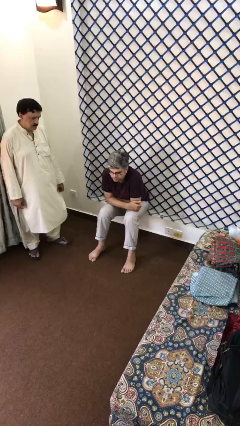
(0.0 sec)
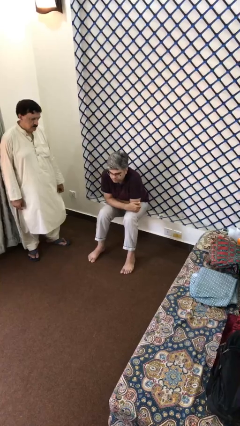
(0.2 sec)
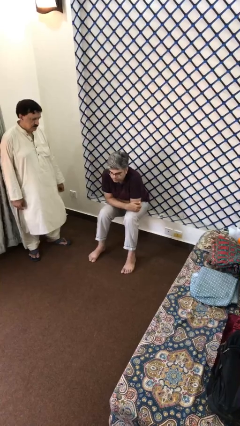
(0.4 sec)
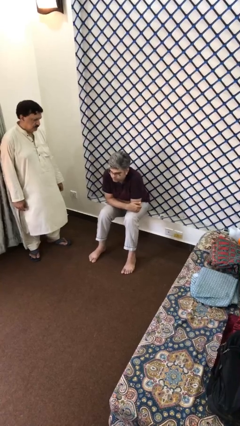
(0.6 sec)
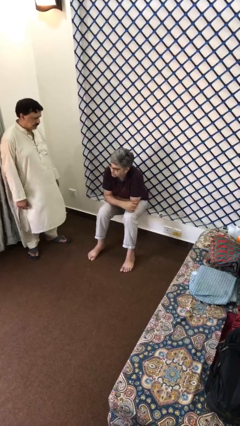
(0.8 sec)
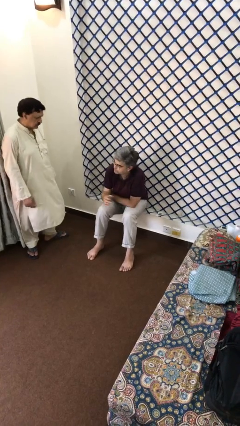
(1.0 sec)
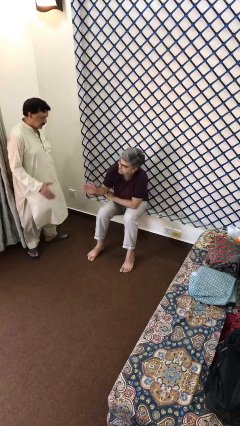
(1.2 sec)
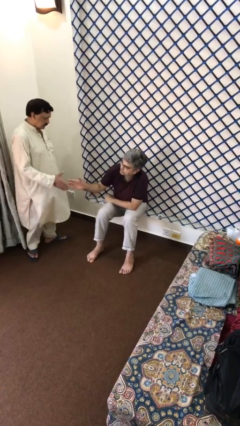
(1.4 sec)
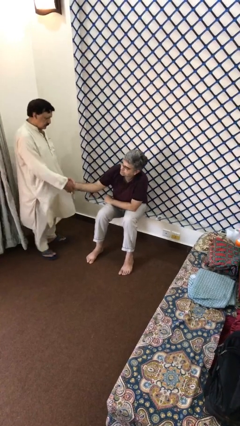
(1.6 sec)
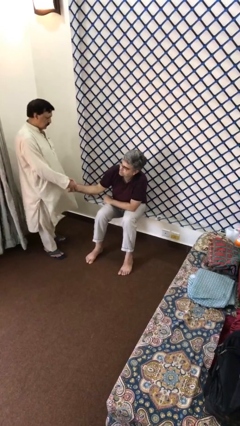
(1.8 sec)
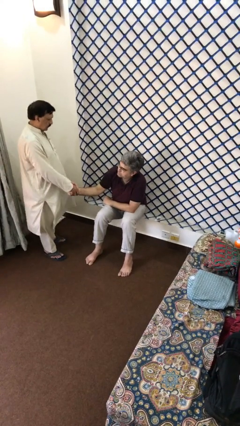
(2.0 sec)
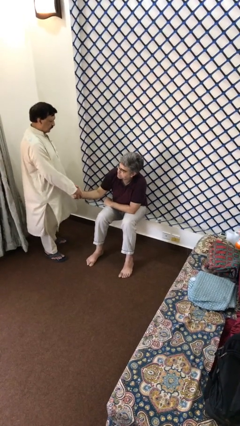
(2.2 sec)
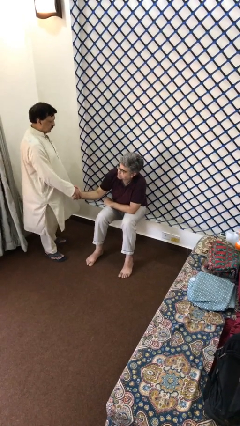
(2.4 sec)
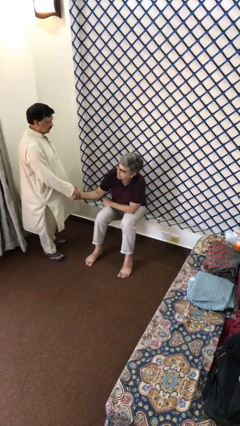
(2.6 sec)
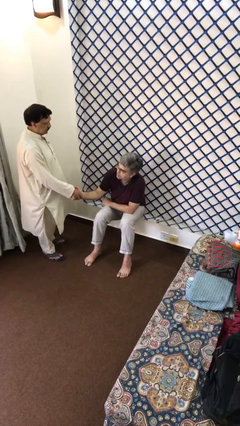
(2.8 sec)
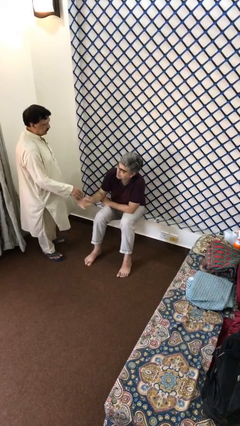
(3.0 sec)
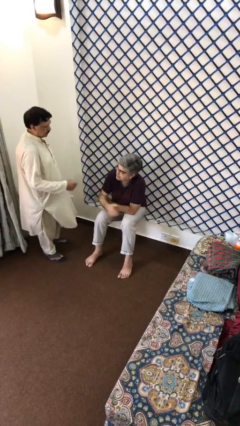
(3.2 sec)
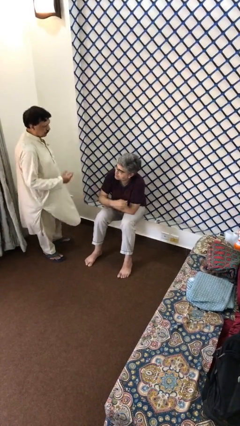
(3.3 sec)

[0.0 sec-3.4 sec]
person shakes hand

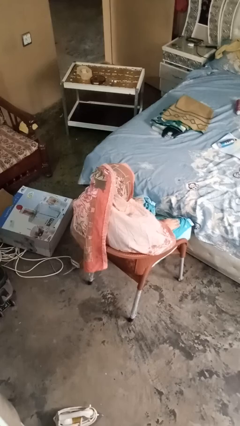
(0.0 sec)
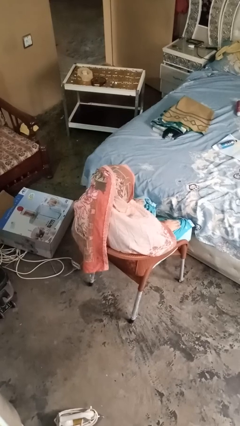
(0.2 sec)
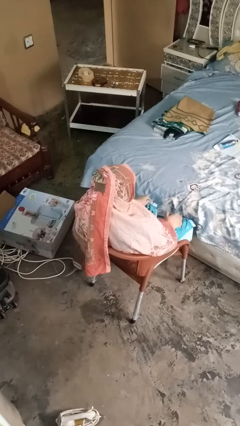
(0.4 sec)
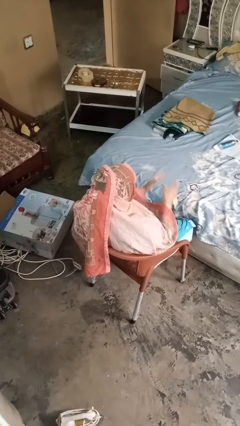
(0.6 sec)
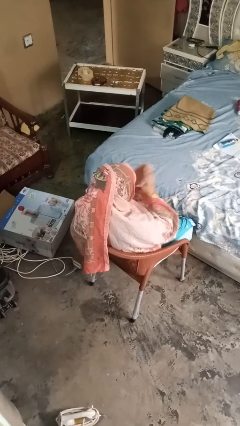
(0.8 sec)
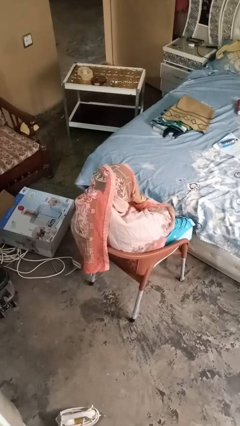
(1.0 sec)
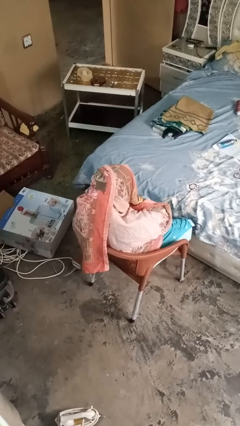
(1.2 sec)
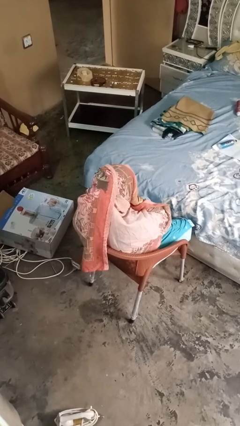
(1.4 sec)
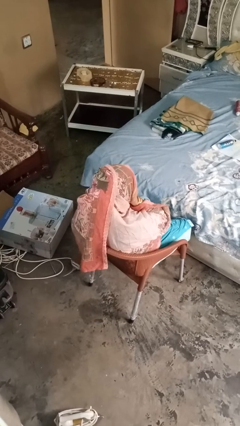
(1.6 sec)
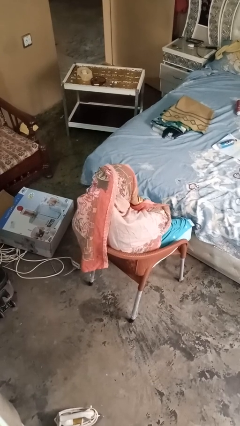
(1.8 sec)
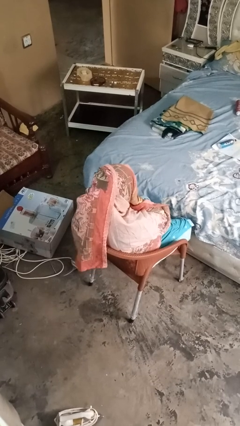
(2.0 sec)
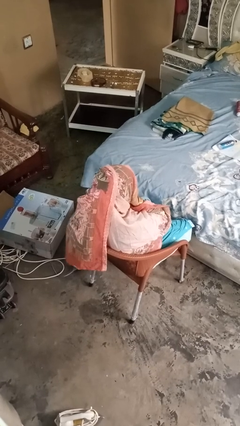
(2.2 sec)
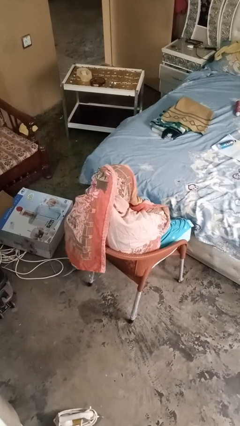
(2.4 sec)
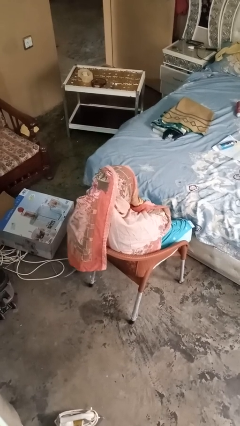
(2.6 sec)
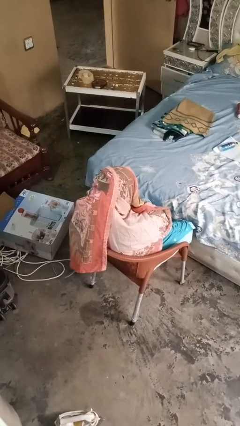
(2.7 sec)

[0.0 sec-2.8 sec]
person covers face with hands

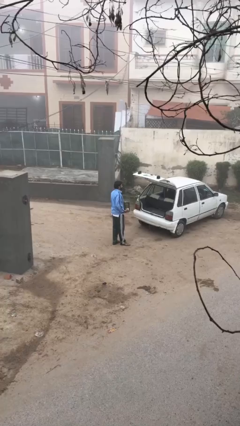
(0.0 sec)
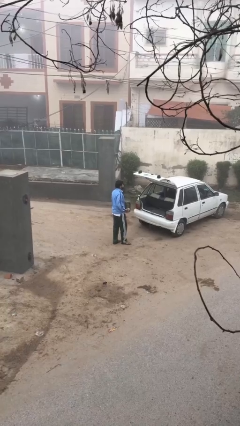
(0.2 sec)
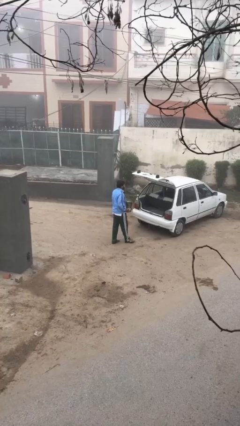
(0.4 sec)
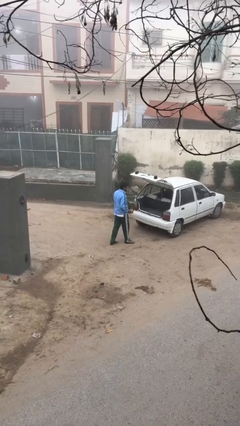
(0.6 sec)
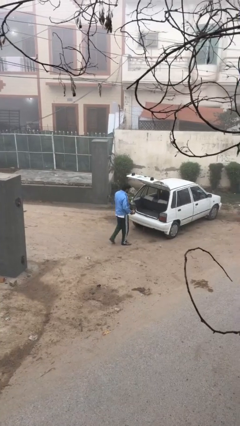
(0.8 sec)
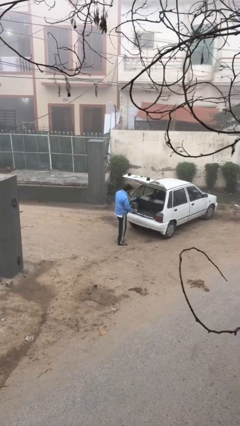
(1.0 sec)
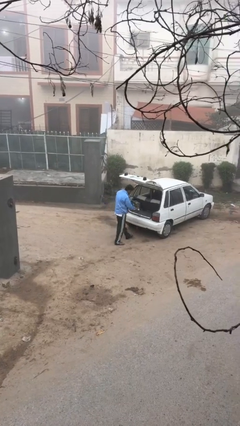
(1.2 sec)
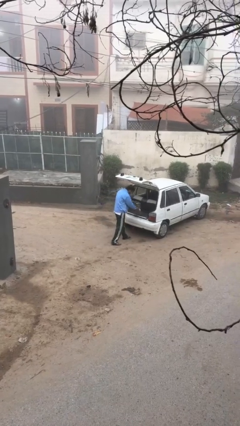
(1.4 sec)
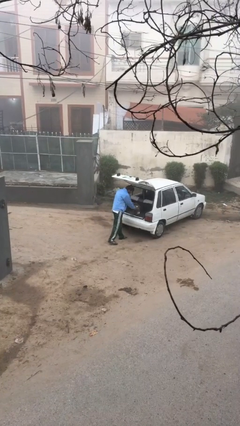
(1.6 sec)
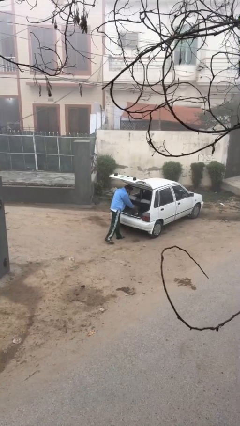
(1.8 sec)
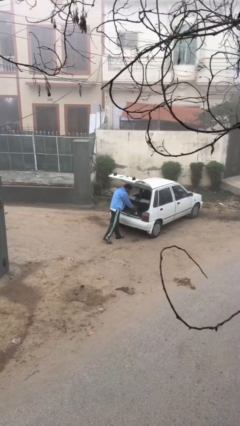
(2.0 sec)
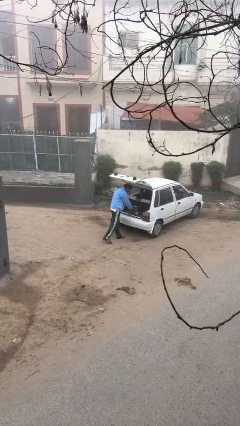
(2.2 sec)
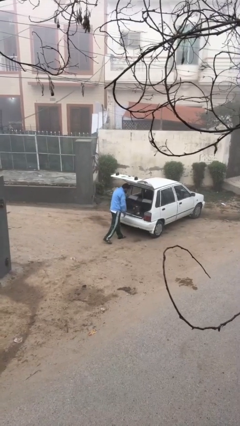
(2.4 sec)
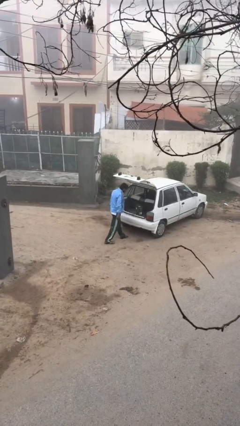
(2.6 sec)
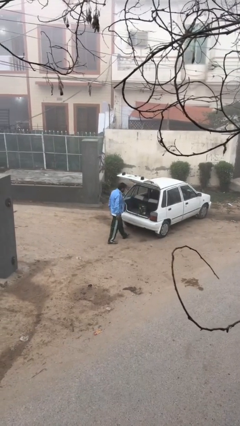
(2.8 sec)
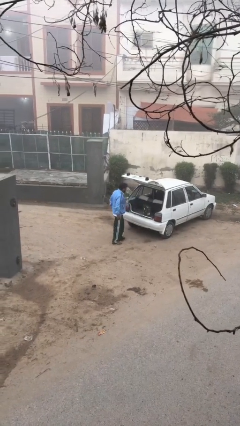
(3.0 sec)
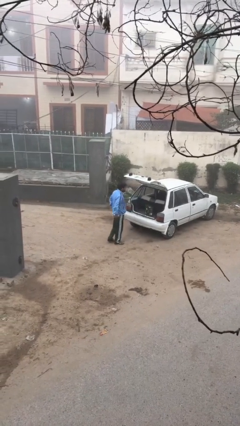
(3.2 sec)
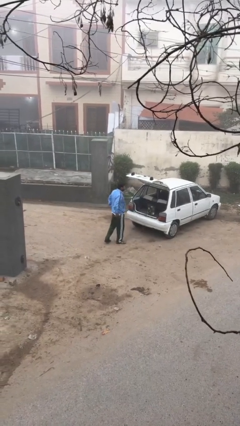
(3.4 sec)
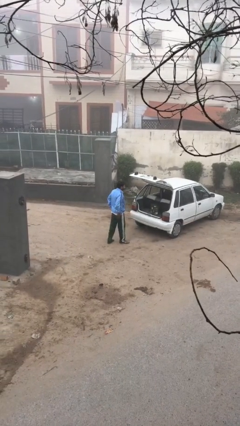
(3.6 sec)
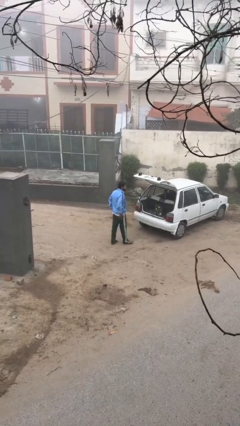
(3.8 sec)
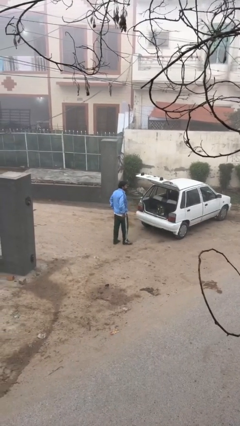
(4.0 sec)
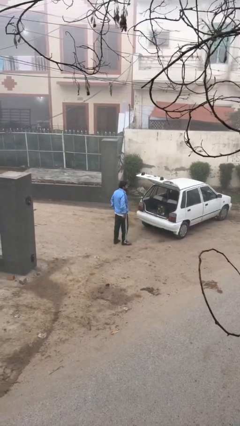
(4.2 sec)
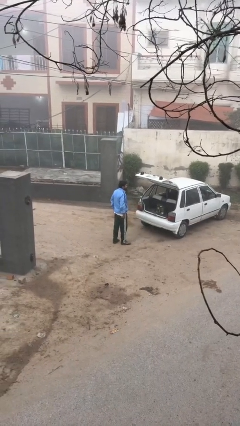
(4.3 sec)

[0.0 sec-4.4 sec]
person loads car

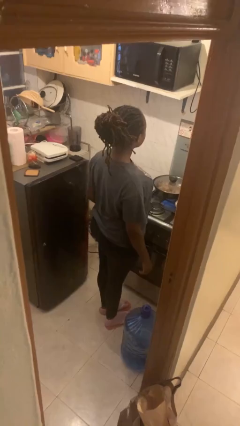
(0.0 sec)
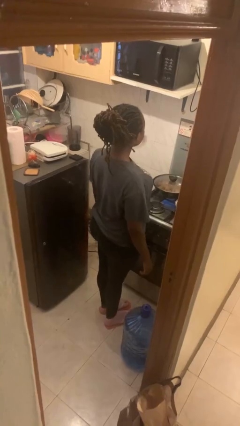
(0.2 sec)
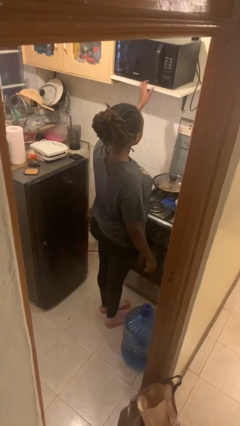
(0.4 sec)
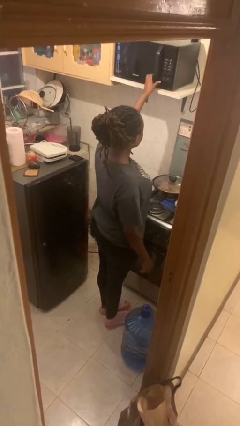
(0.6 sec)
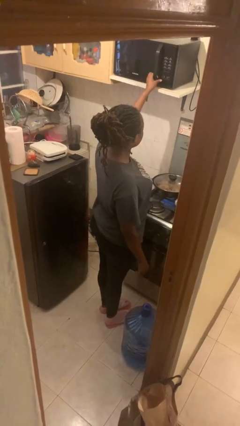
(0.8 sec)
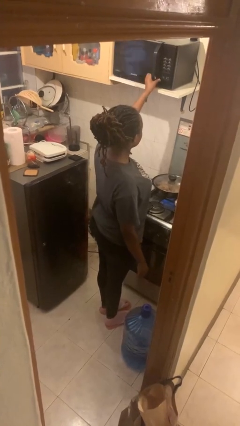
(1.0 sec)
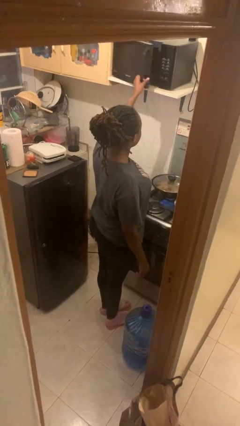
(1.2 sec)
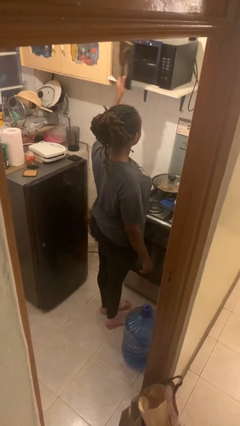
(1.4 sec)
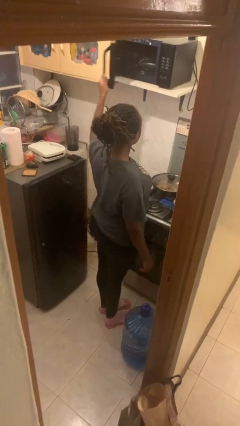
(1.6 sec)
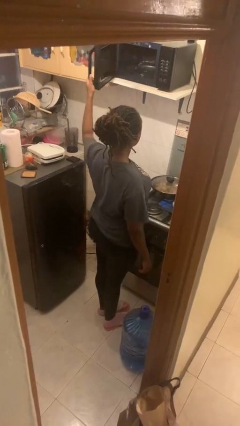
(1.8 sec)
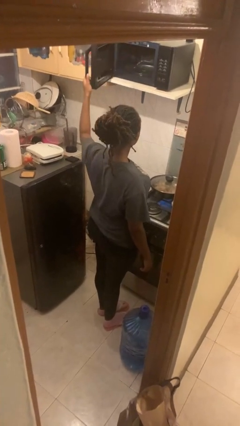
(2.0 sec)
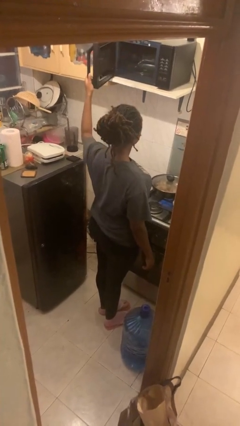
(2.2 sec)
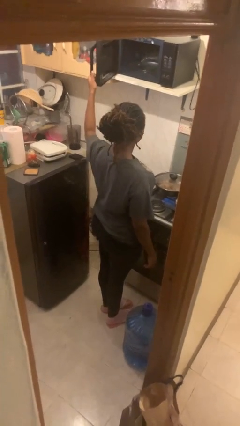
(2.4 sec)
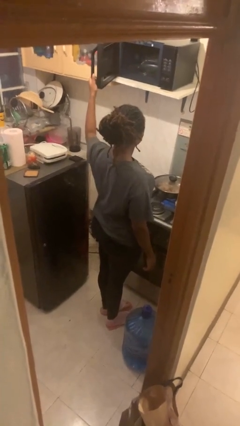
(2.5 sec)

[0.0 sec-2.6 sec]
person opens microwave

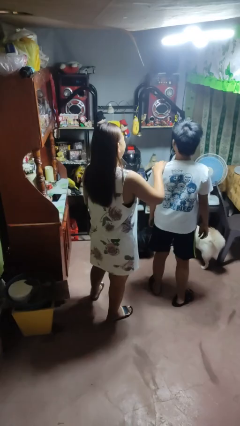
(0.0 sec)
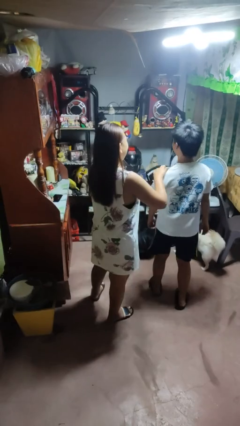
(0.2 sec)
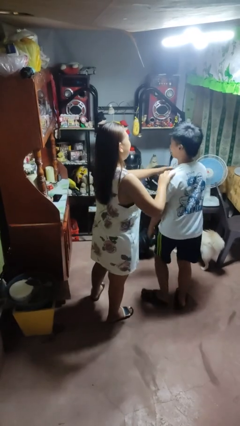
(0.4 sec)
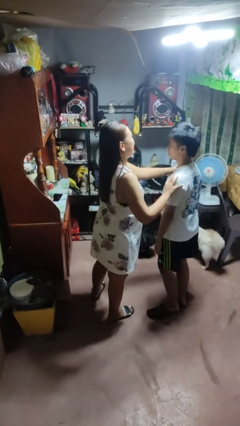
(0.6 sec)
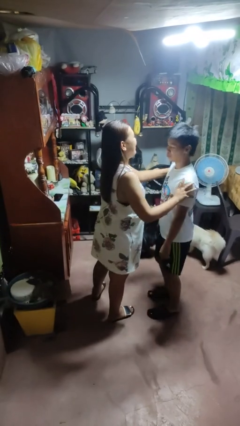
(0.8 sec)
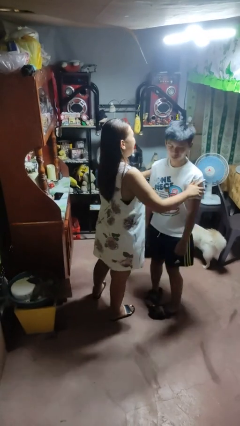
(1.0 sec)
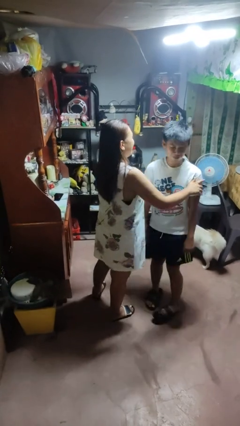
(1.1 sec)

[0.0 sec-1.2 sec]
person spins person around

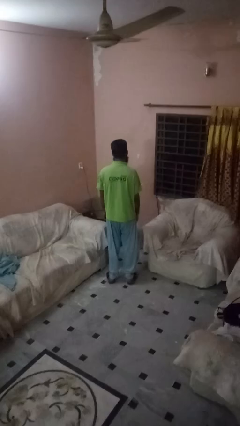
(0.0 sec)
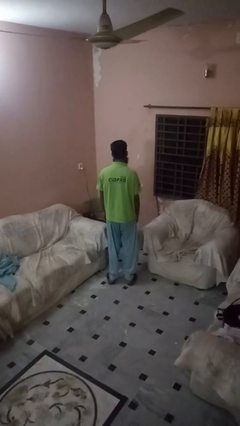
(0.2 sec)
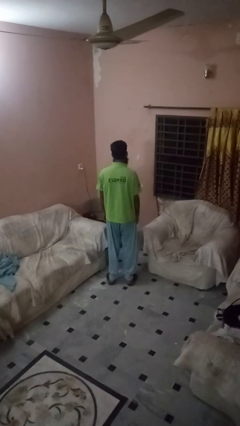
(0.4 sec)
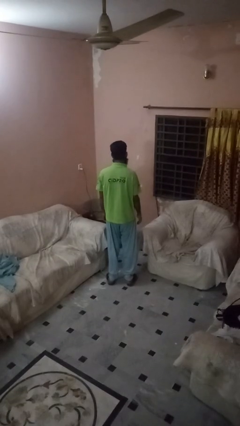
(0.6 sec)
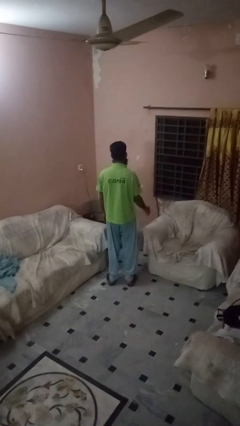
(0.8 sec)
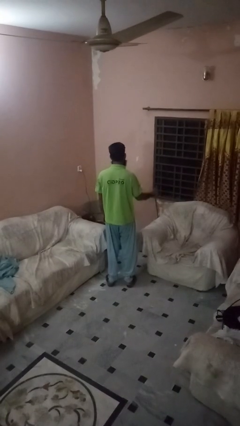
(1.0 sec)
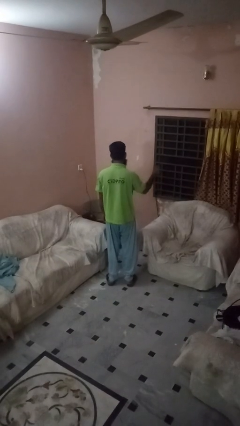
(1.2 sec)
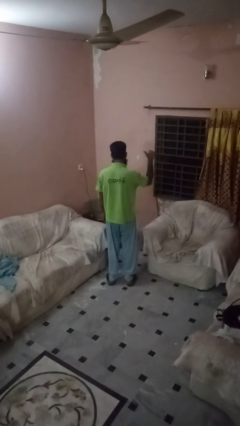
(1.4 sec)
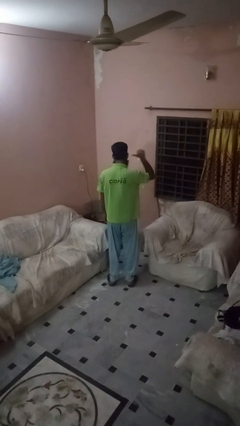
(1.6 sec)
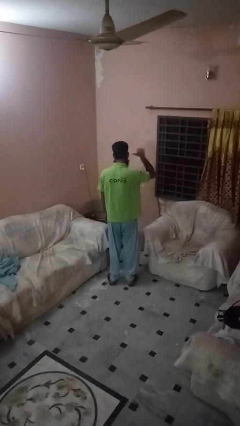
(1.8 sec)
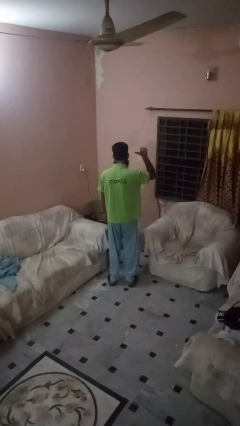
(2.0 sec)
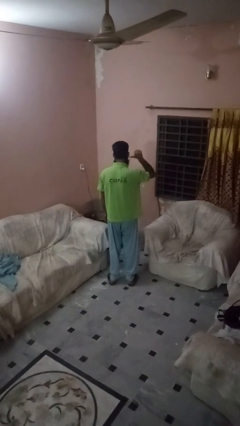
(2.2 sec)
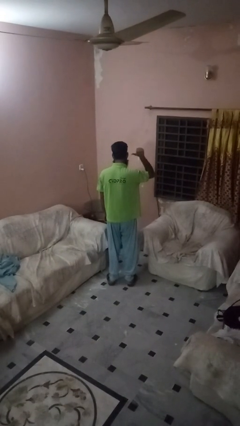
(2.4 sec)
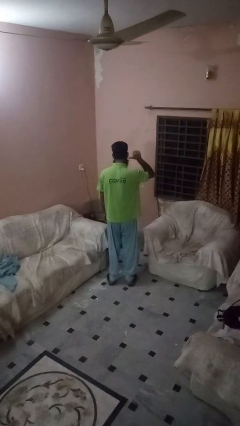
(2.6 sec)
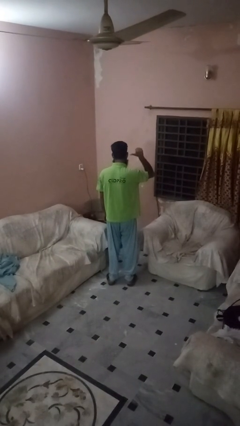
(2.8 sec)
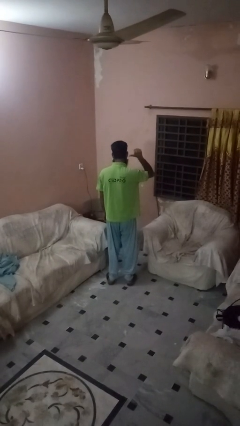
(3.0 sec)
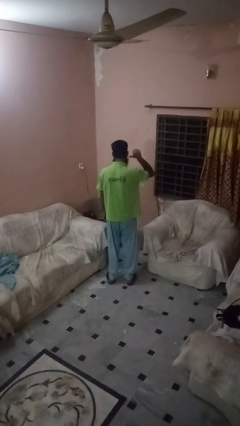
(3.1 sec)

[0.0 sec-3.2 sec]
person gestures behind me
